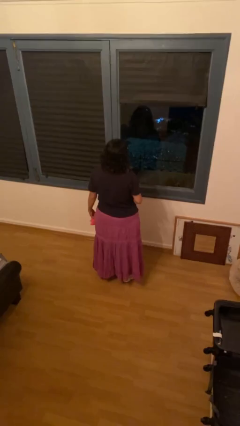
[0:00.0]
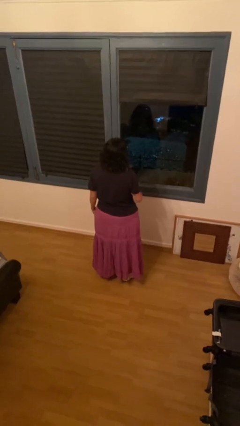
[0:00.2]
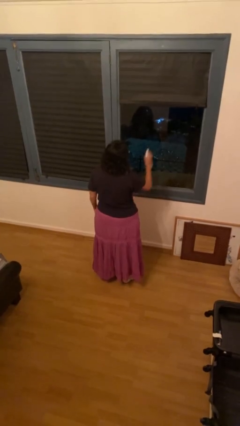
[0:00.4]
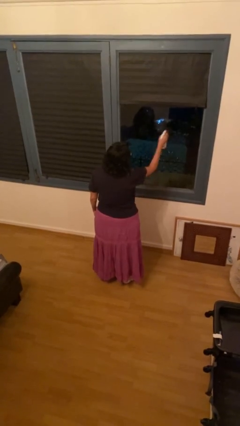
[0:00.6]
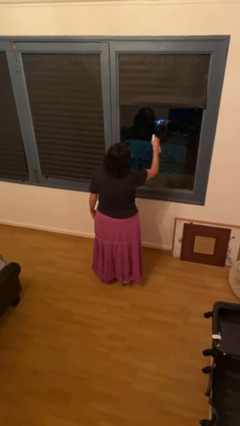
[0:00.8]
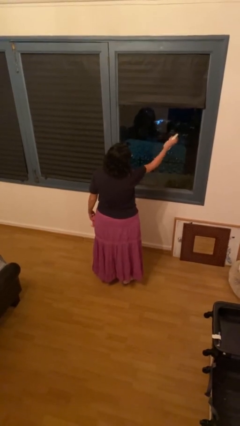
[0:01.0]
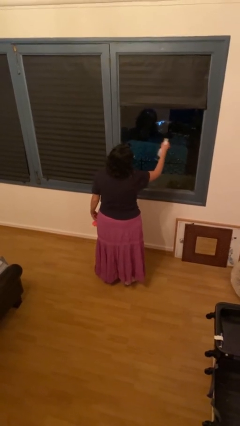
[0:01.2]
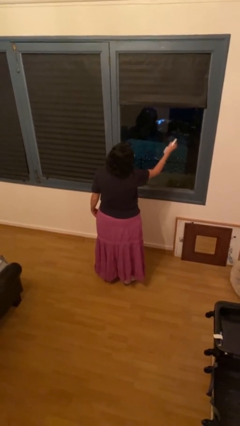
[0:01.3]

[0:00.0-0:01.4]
person sprays from bottle

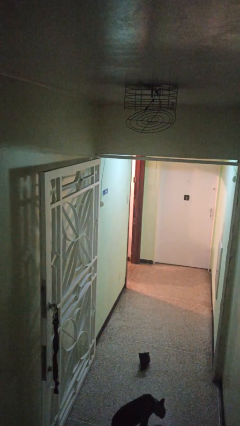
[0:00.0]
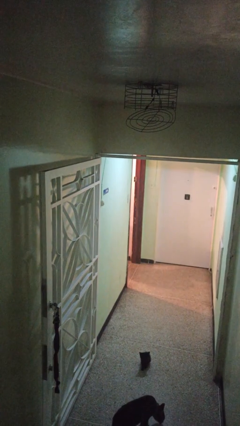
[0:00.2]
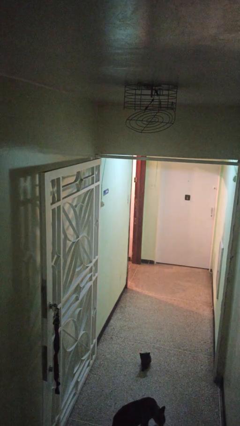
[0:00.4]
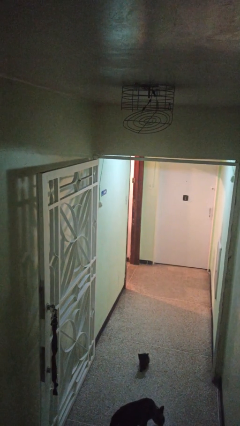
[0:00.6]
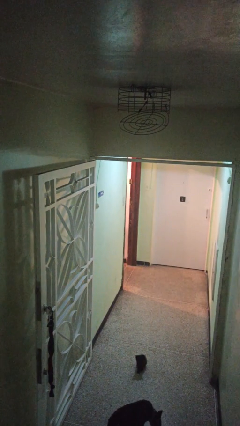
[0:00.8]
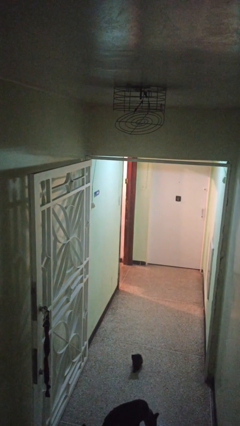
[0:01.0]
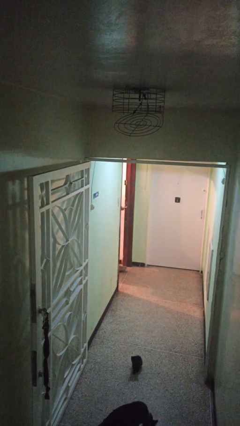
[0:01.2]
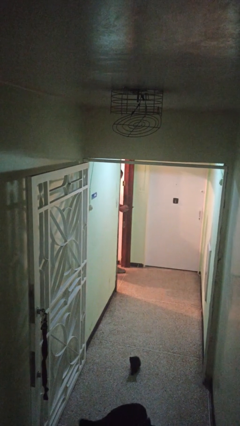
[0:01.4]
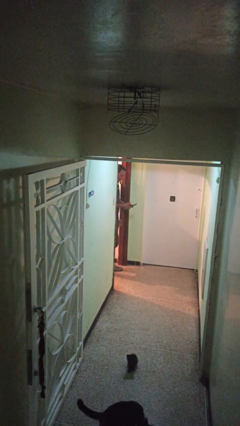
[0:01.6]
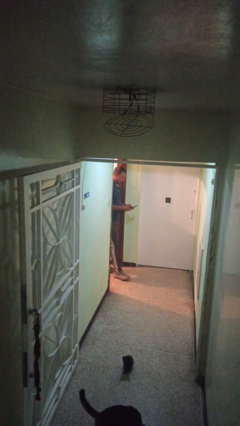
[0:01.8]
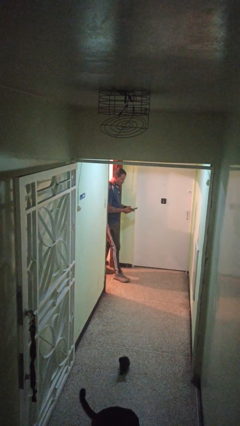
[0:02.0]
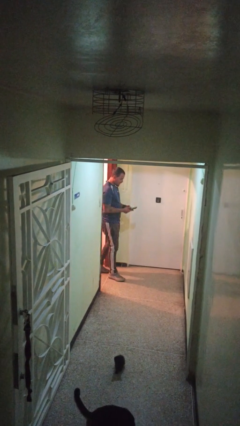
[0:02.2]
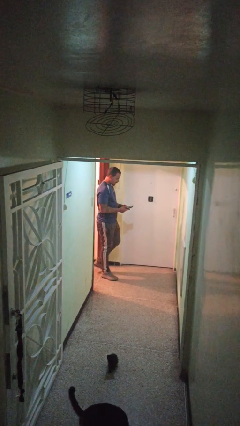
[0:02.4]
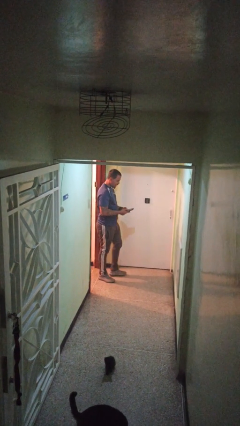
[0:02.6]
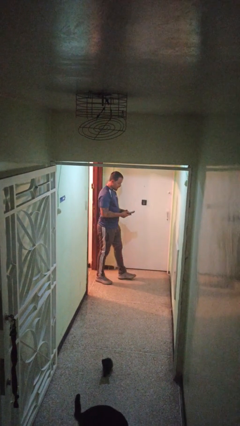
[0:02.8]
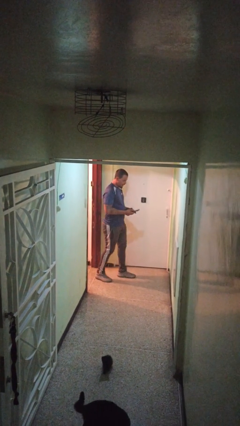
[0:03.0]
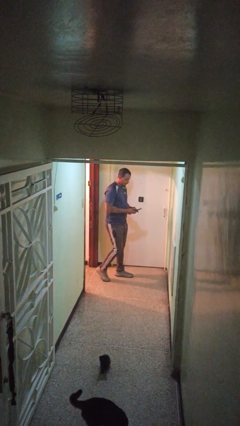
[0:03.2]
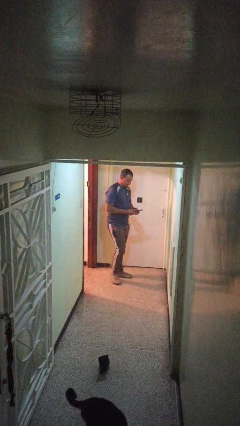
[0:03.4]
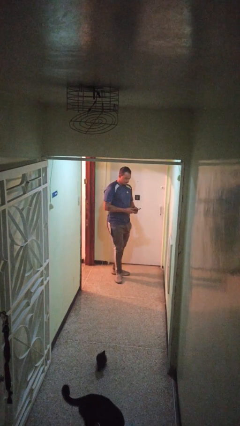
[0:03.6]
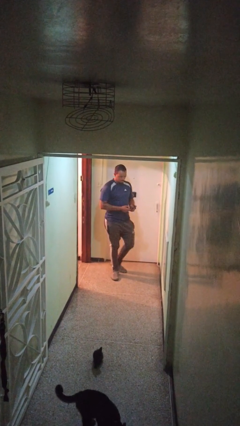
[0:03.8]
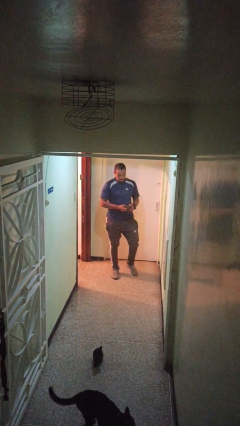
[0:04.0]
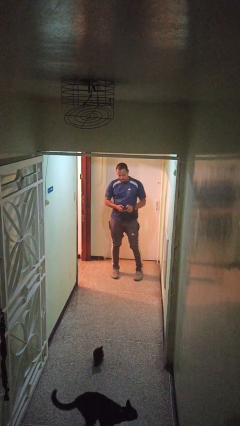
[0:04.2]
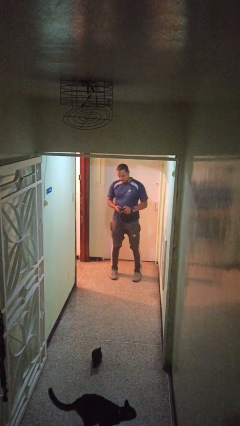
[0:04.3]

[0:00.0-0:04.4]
person enters scene through structure

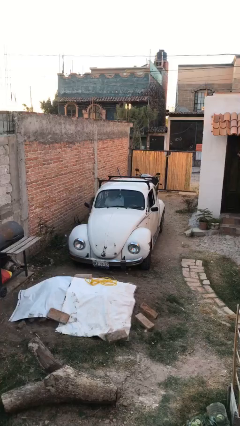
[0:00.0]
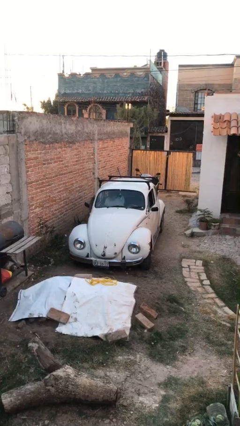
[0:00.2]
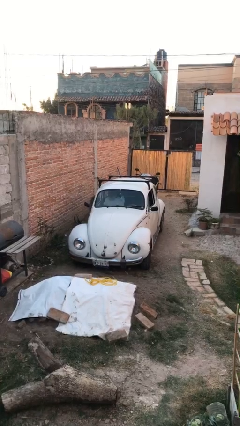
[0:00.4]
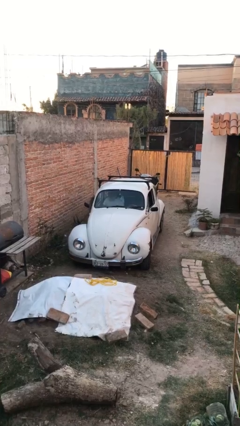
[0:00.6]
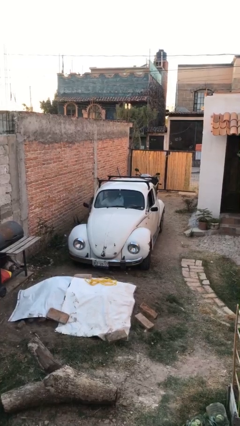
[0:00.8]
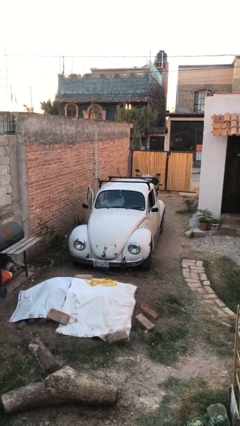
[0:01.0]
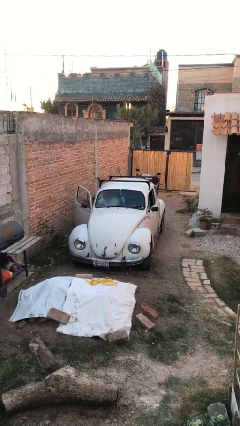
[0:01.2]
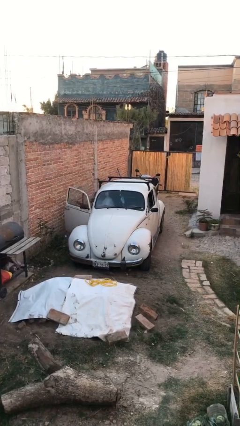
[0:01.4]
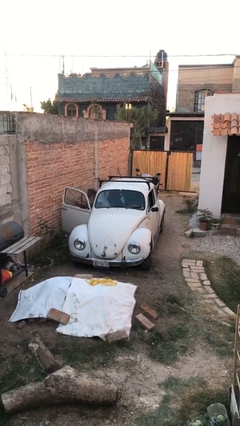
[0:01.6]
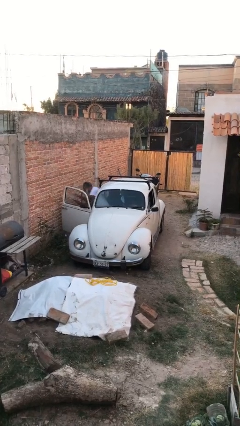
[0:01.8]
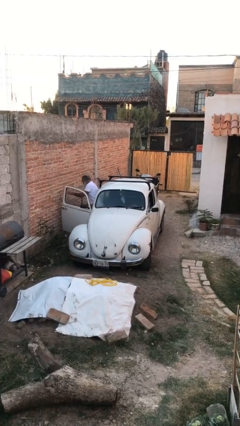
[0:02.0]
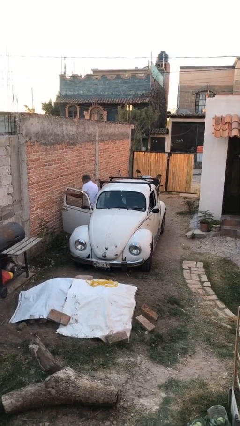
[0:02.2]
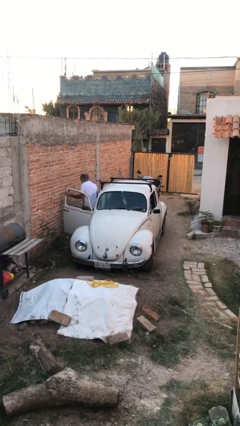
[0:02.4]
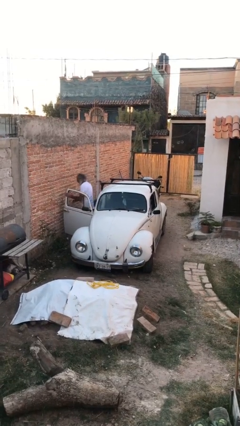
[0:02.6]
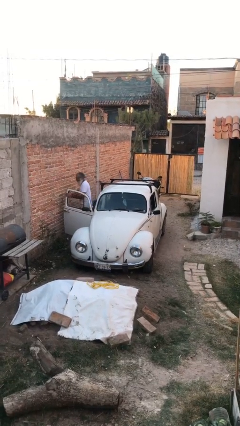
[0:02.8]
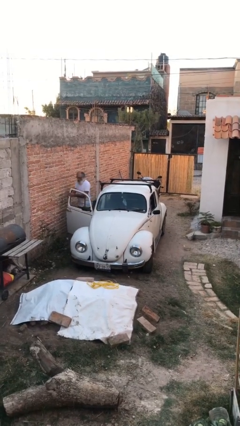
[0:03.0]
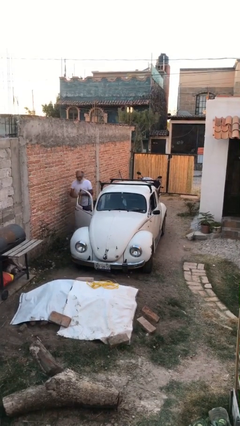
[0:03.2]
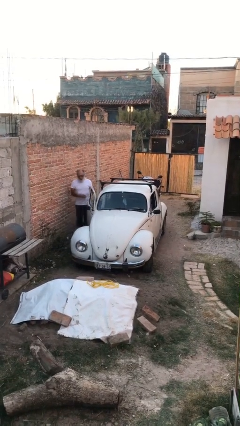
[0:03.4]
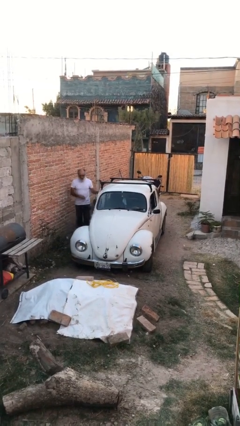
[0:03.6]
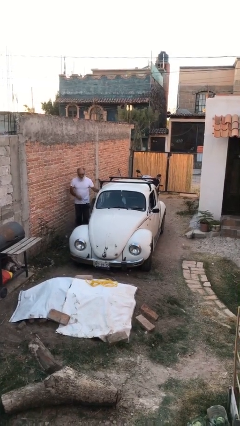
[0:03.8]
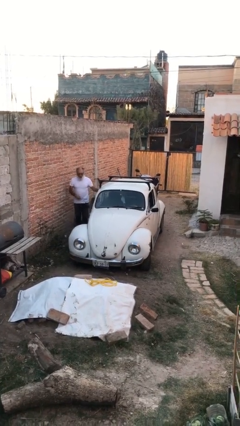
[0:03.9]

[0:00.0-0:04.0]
car drops off person

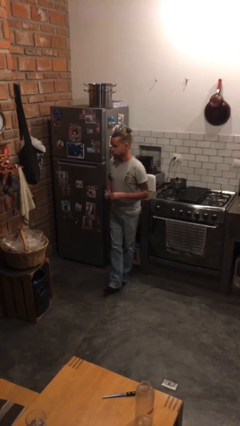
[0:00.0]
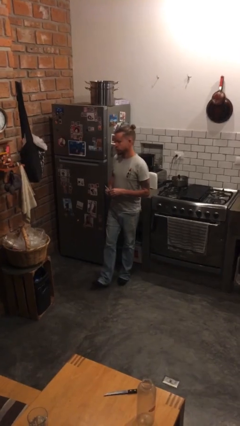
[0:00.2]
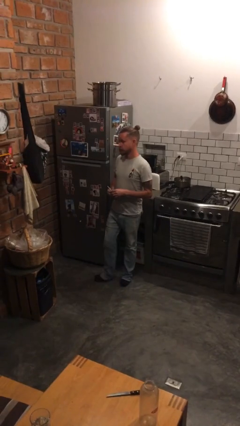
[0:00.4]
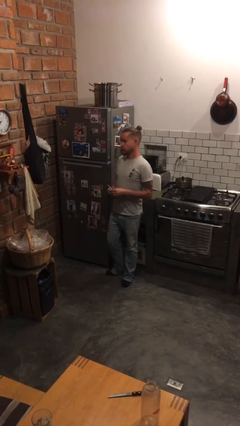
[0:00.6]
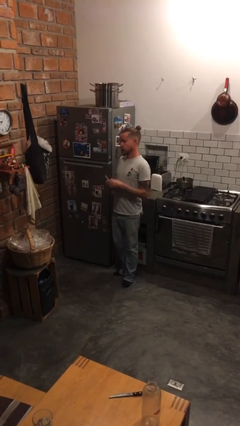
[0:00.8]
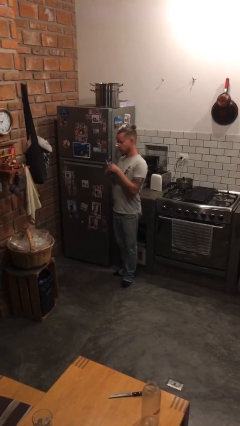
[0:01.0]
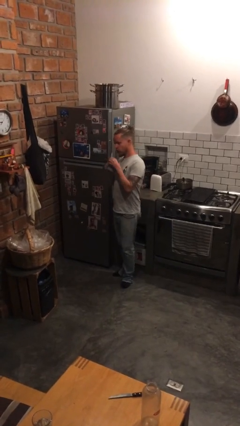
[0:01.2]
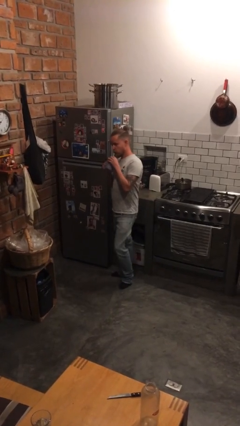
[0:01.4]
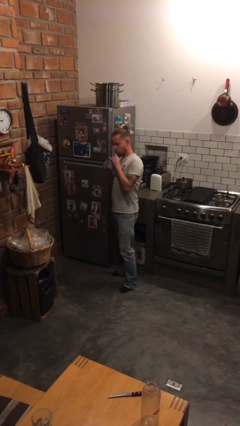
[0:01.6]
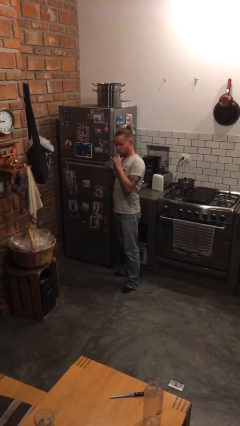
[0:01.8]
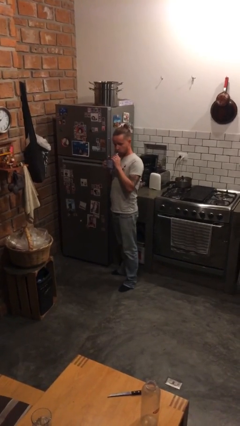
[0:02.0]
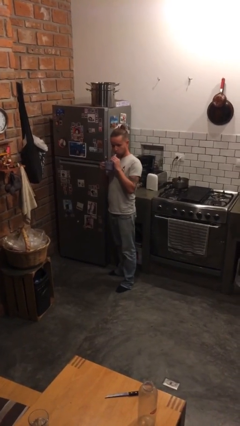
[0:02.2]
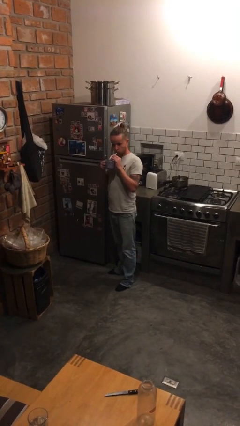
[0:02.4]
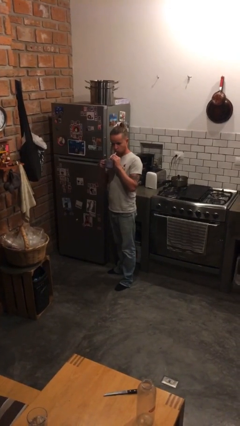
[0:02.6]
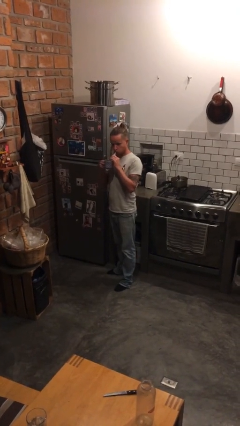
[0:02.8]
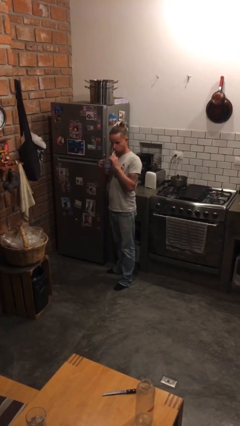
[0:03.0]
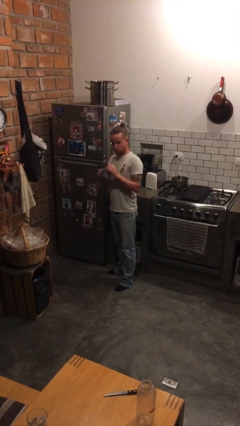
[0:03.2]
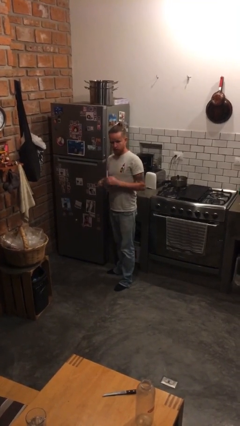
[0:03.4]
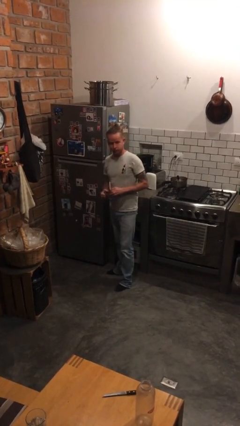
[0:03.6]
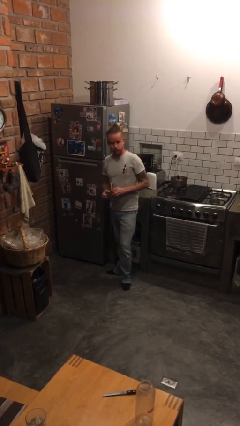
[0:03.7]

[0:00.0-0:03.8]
person drinks from straw

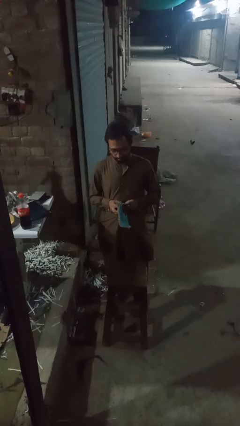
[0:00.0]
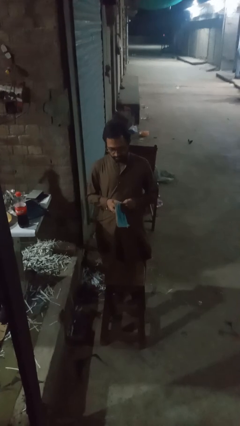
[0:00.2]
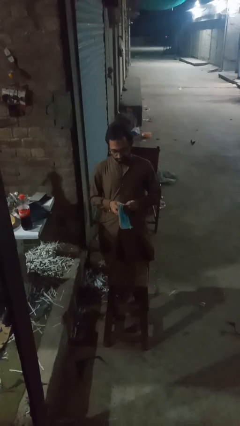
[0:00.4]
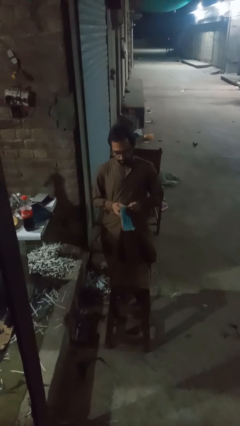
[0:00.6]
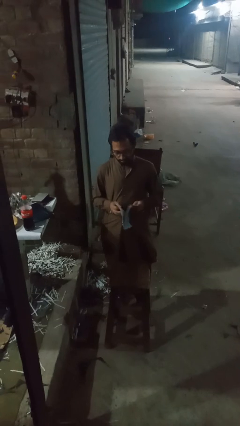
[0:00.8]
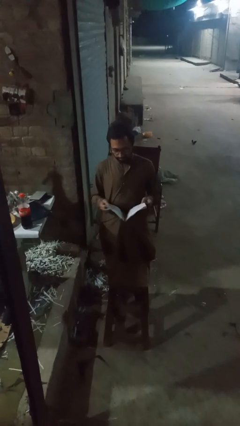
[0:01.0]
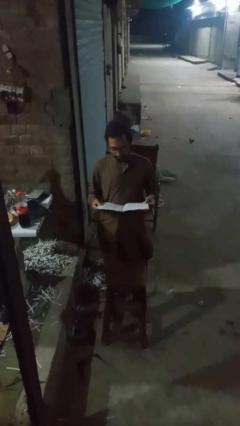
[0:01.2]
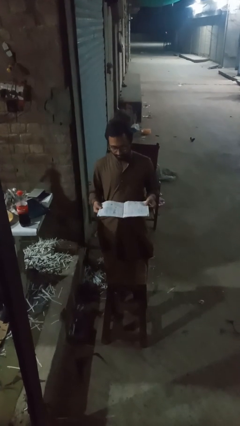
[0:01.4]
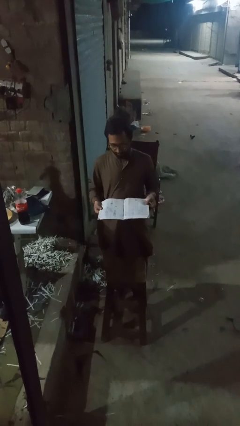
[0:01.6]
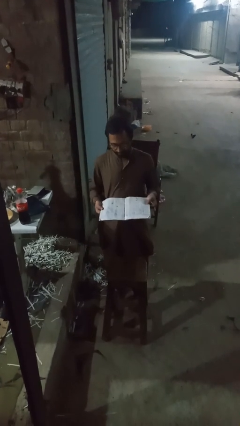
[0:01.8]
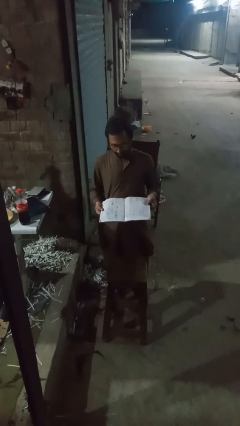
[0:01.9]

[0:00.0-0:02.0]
person reads newspaper

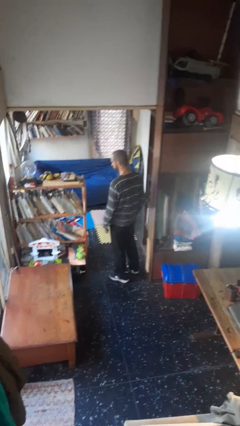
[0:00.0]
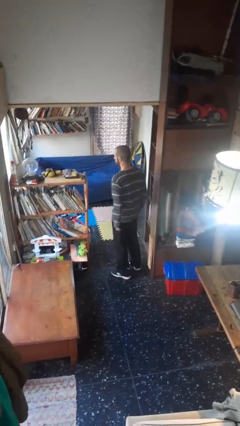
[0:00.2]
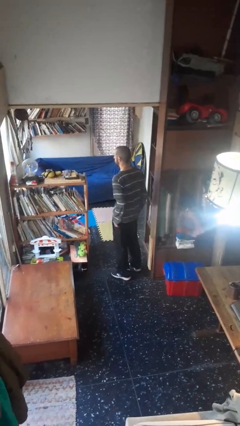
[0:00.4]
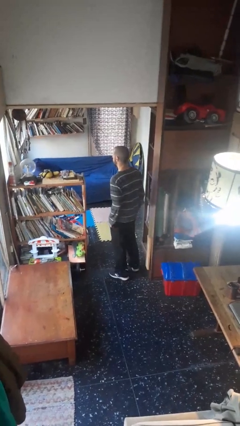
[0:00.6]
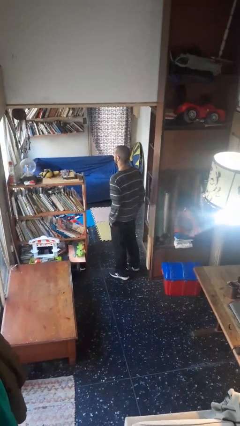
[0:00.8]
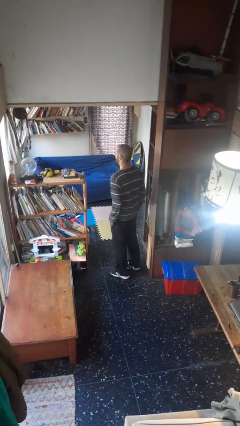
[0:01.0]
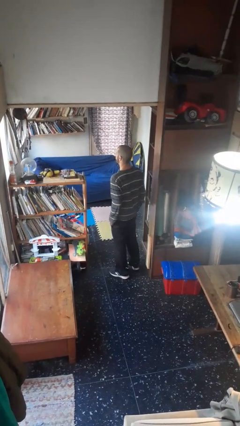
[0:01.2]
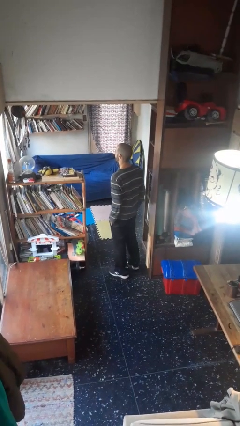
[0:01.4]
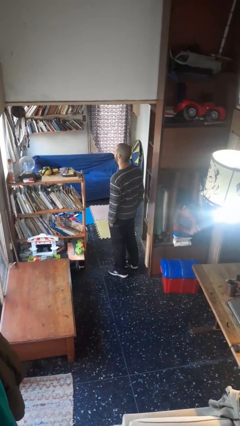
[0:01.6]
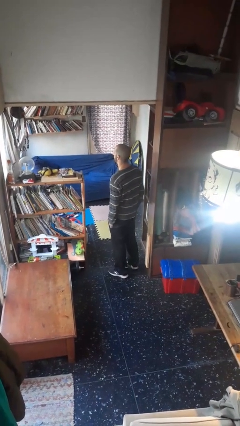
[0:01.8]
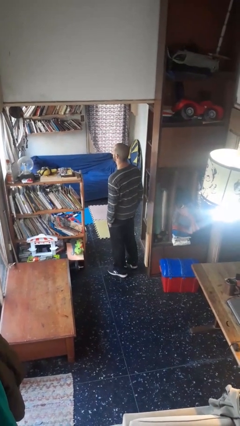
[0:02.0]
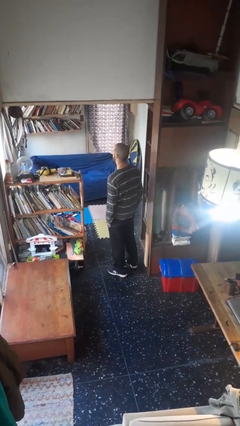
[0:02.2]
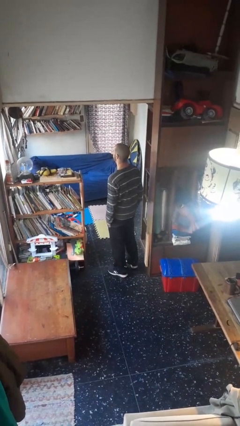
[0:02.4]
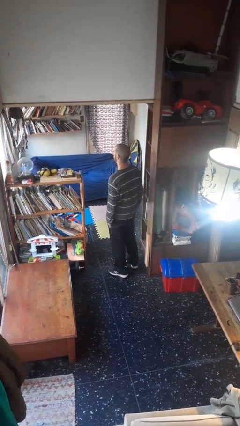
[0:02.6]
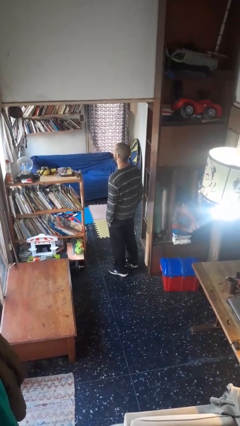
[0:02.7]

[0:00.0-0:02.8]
person puts phone into pocket
